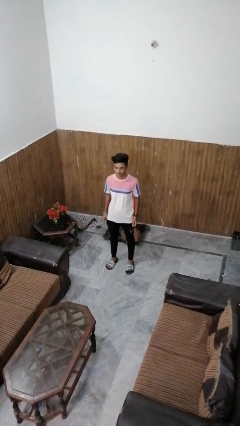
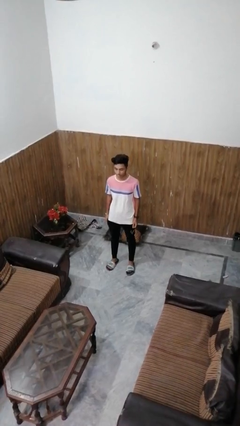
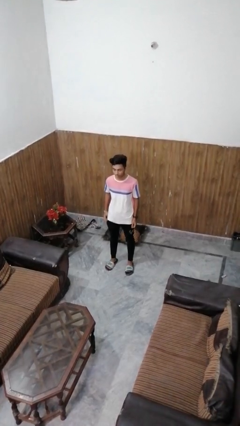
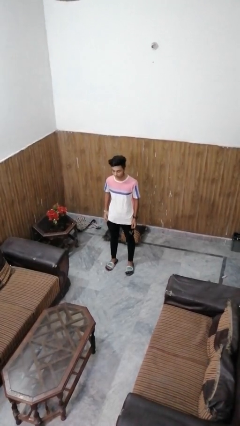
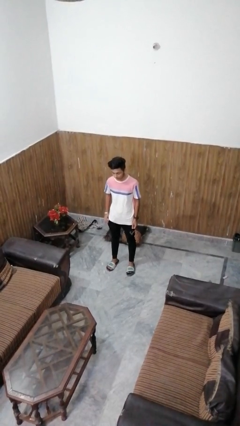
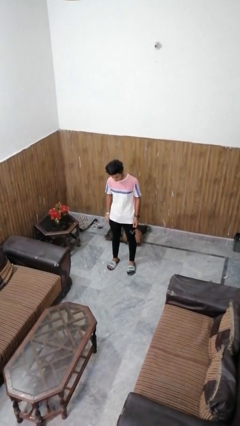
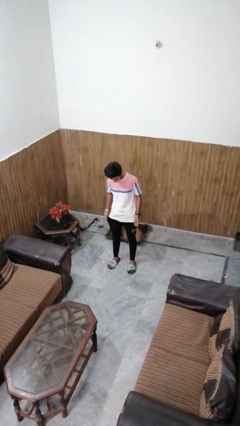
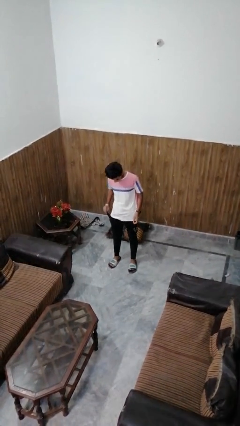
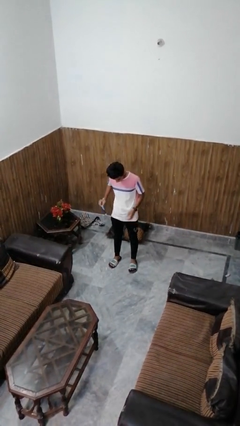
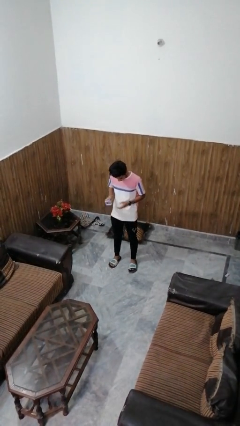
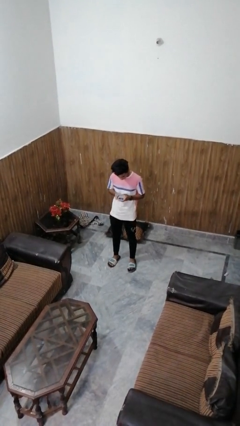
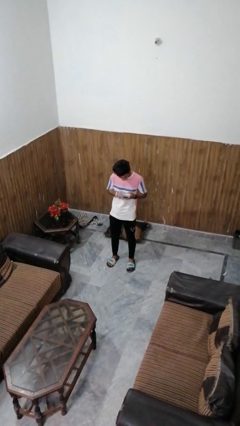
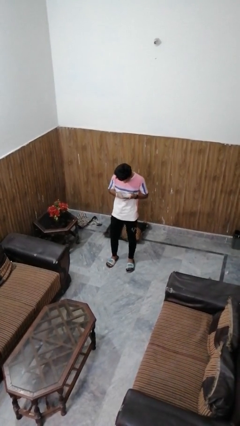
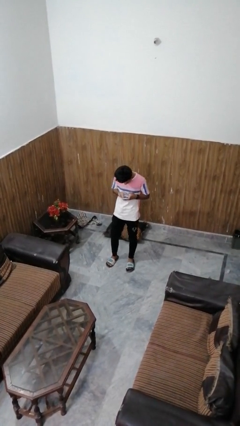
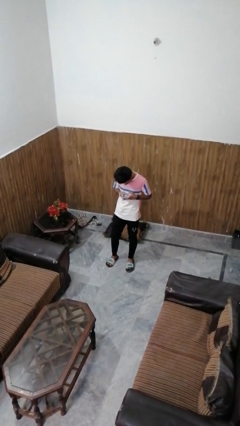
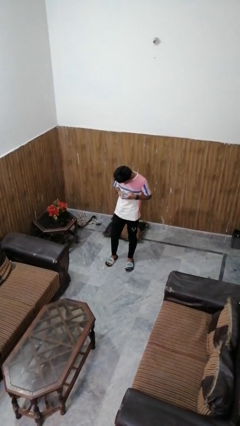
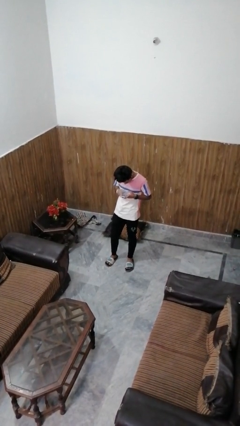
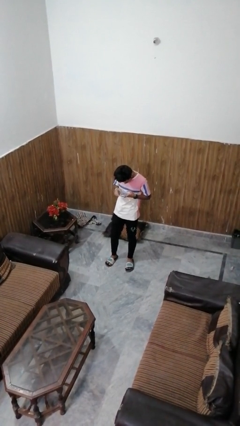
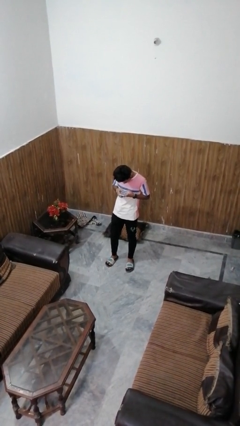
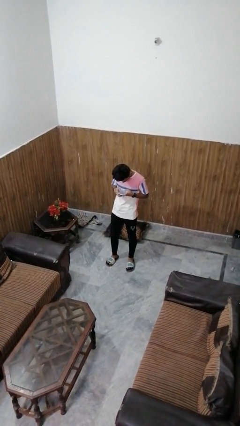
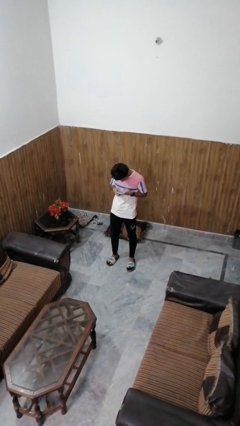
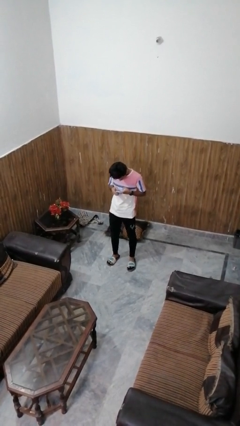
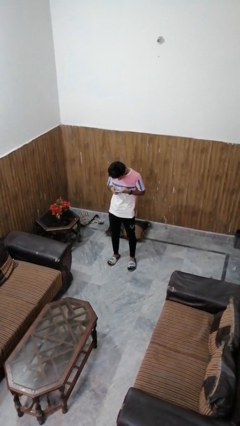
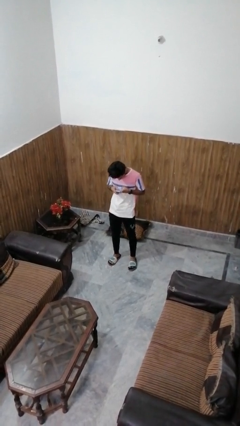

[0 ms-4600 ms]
person takes phone from pocket

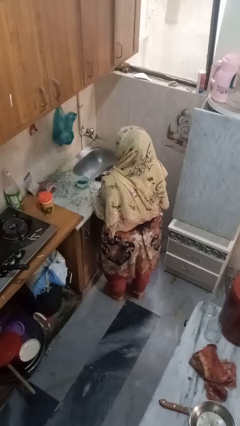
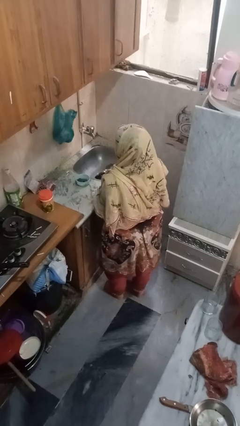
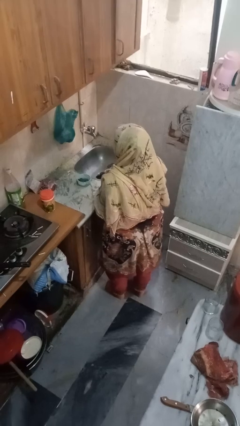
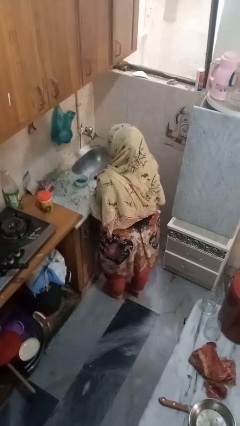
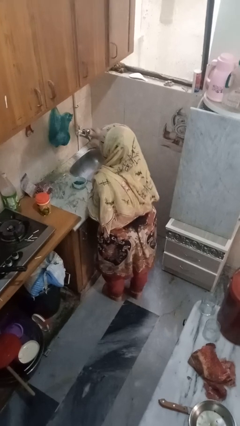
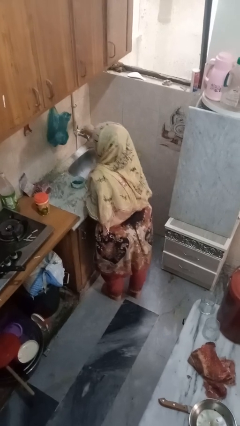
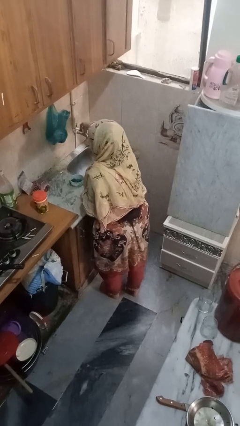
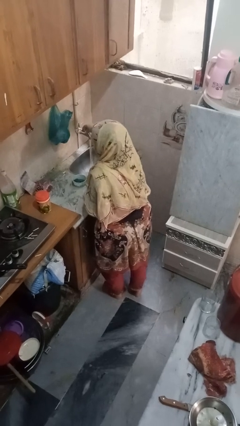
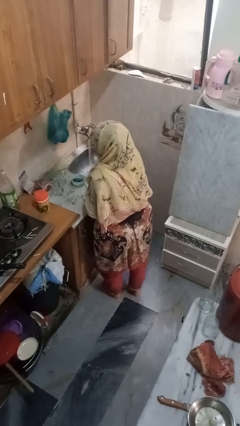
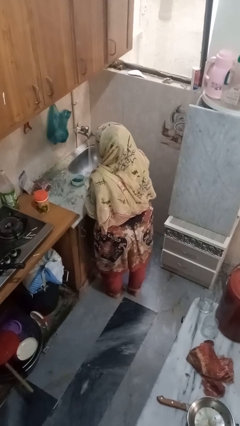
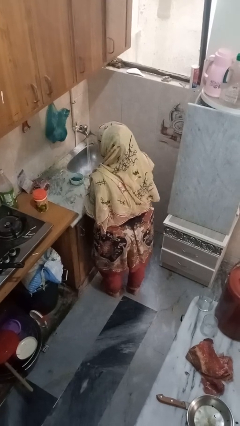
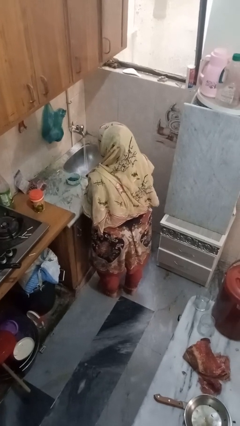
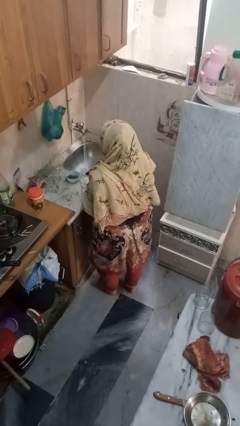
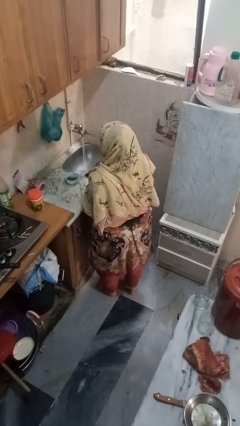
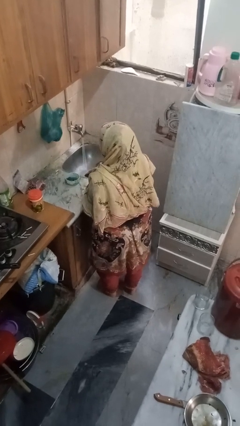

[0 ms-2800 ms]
person turns on faucet

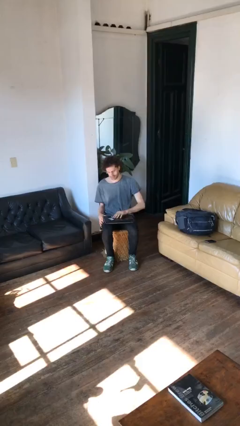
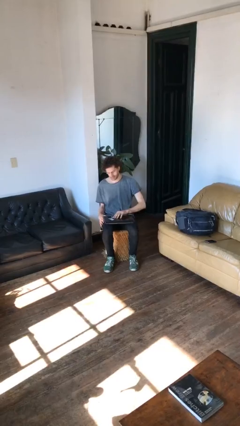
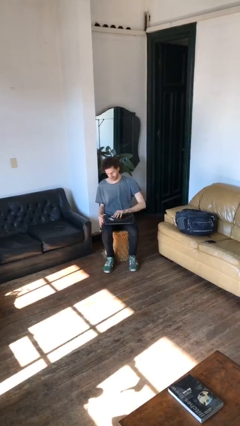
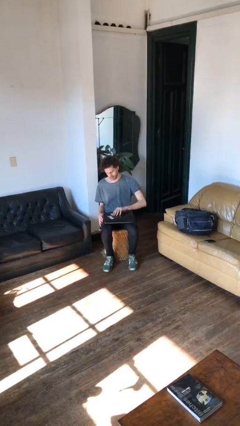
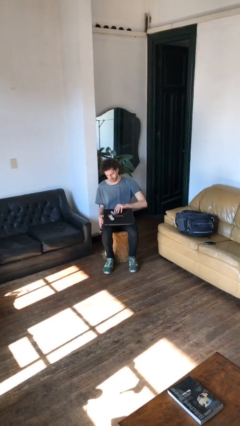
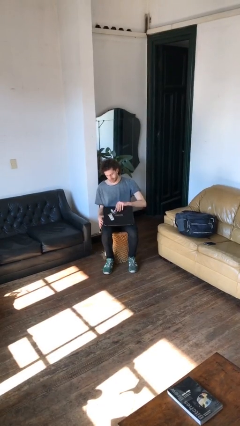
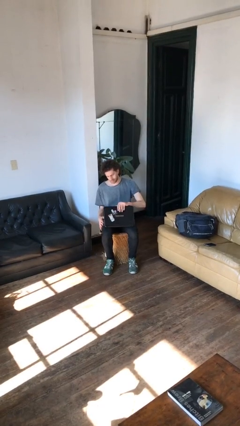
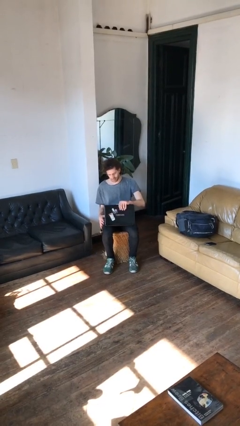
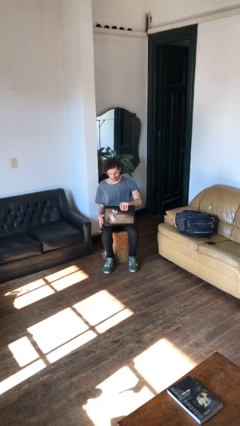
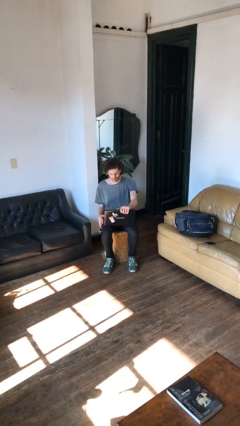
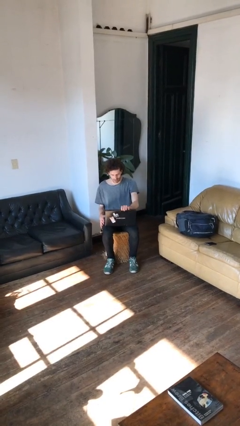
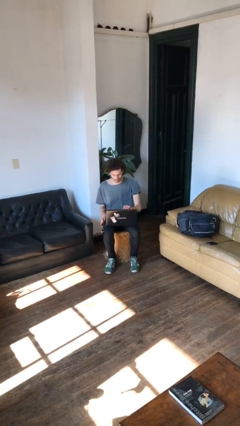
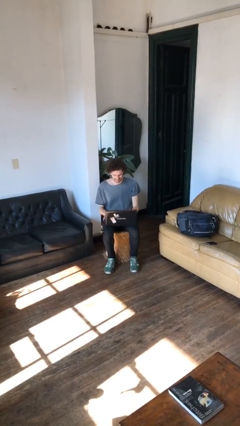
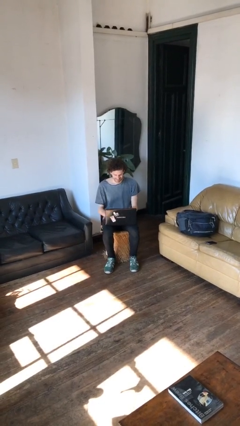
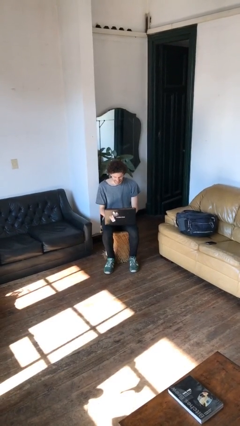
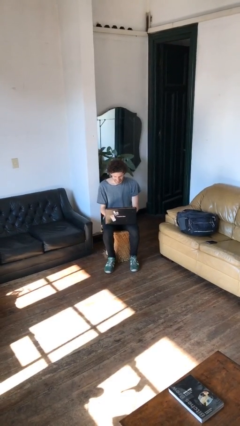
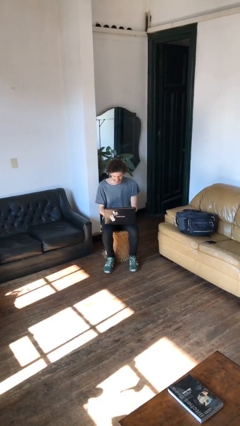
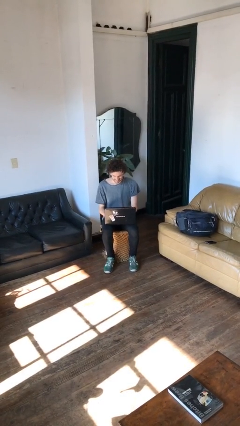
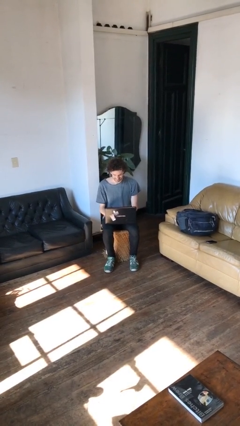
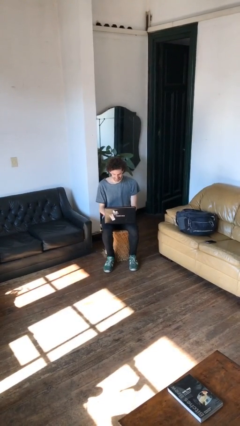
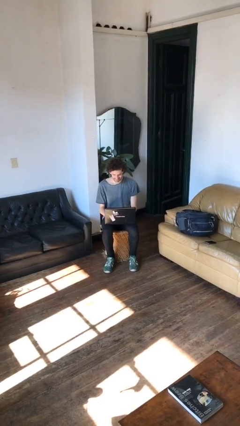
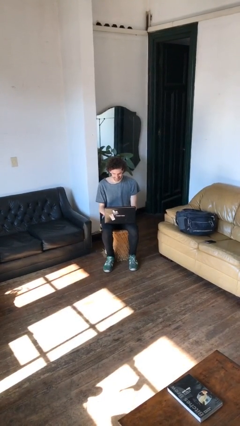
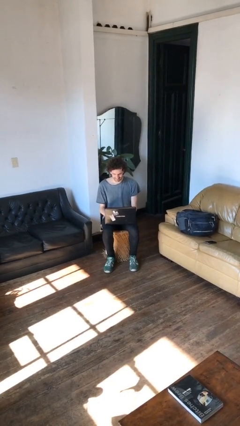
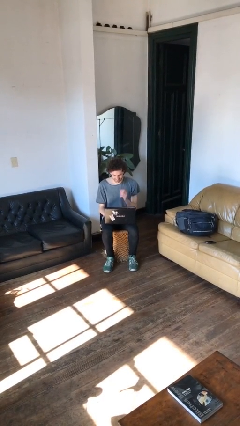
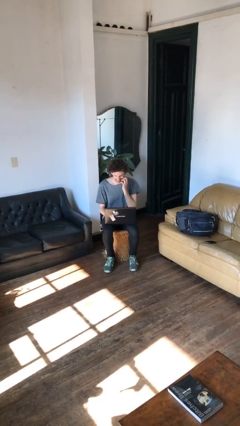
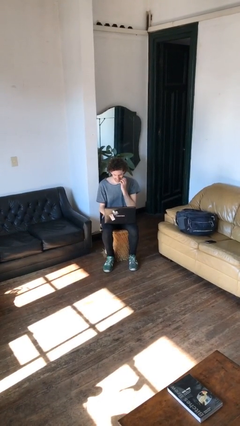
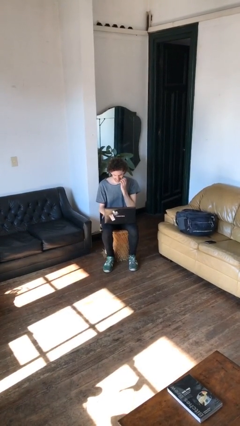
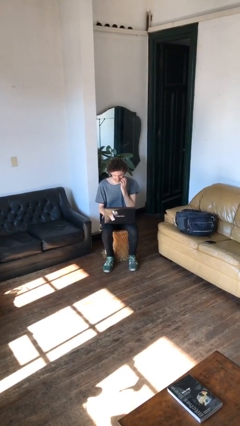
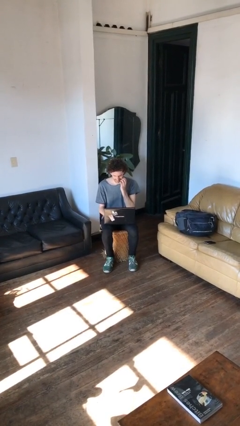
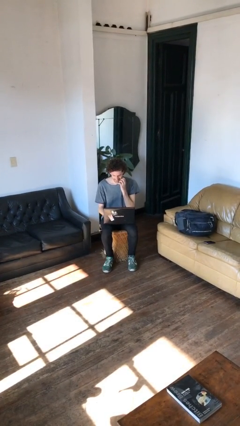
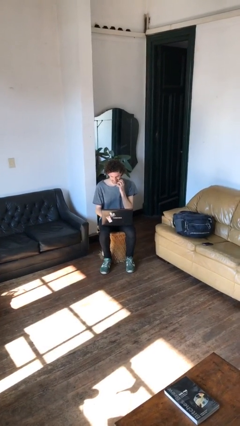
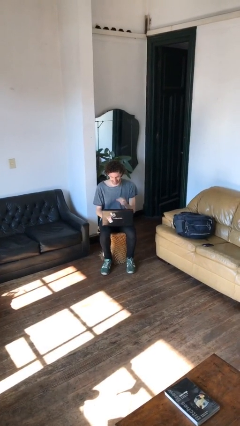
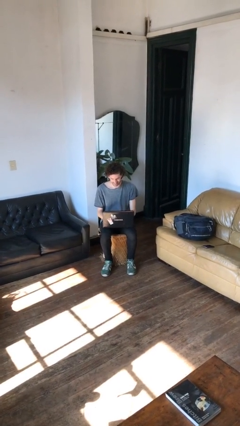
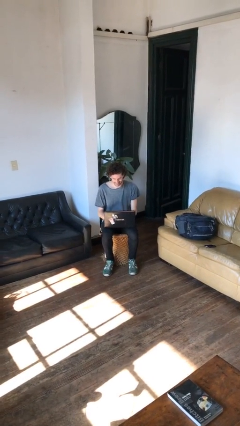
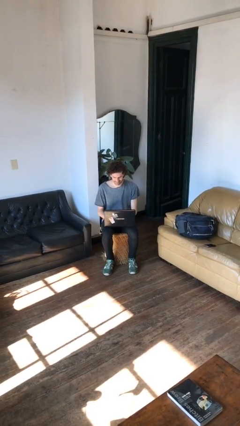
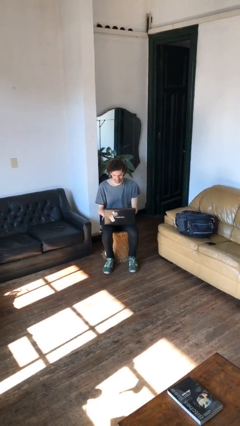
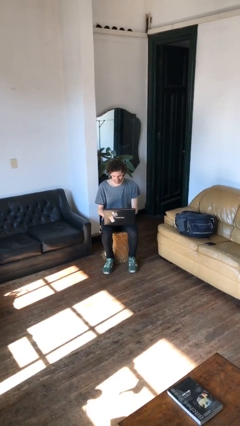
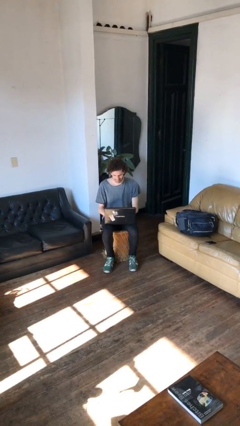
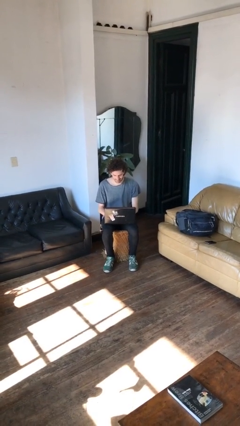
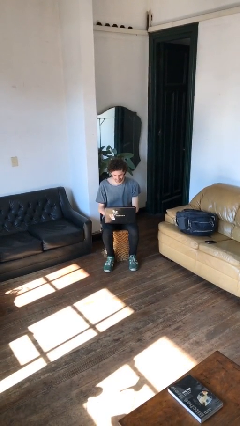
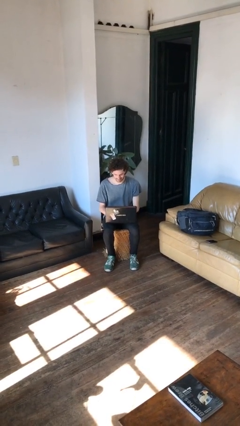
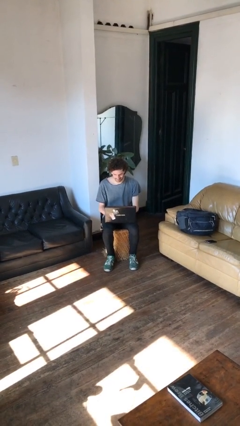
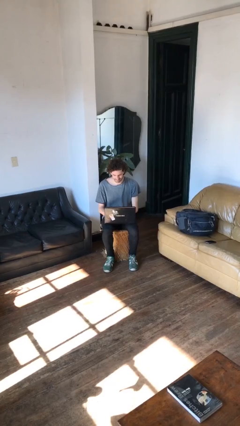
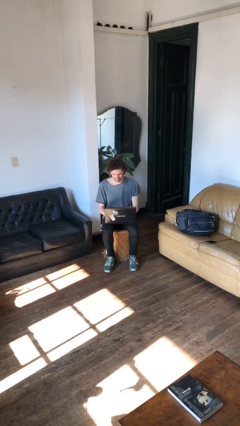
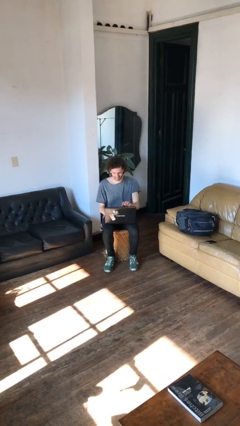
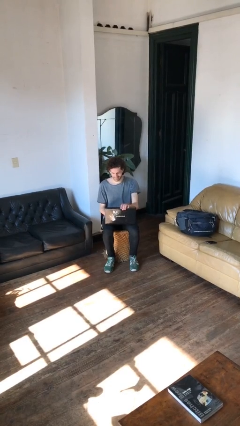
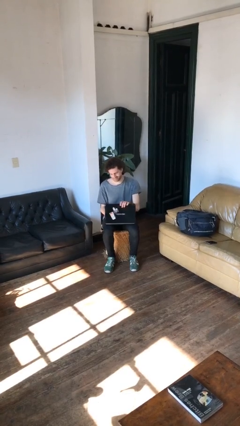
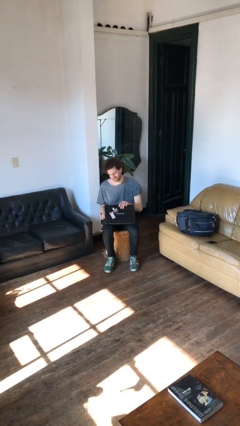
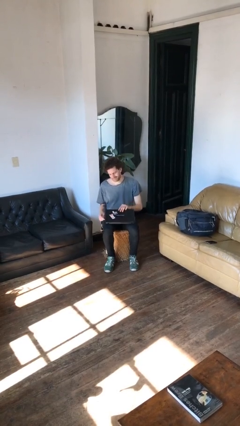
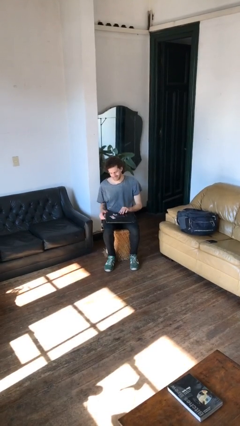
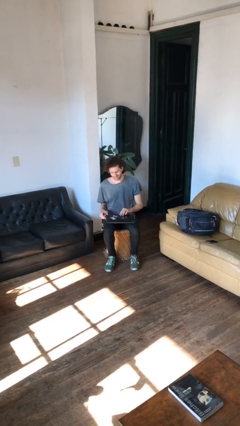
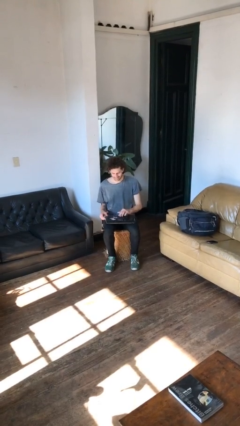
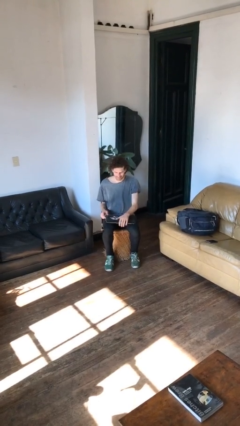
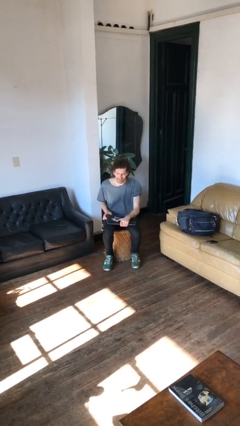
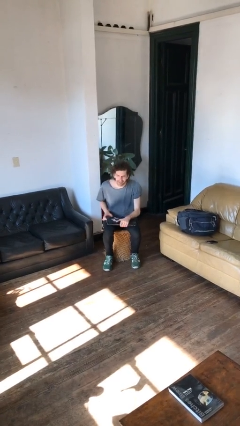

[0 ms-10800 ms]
person interacts with laptop
